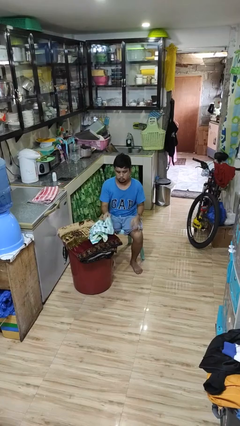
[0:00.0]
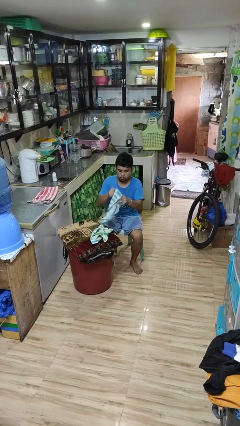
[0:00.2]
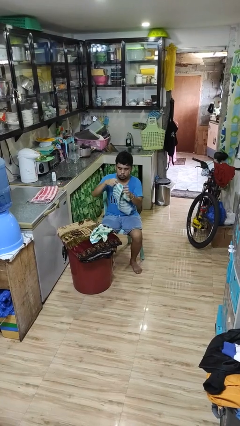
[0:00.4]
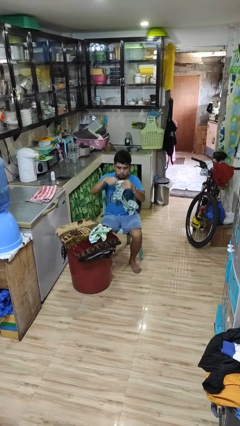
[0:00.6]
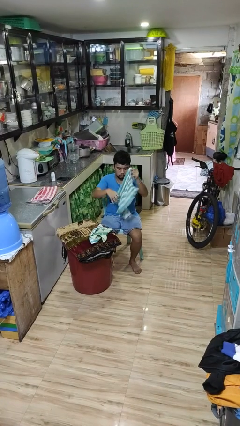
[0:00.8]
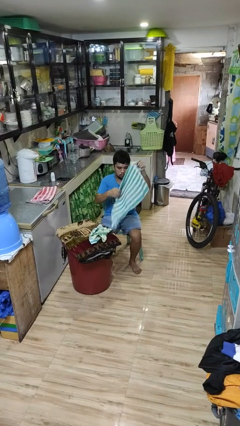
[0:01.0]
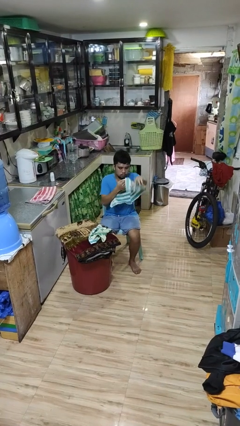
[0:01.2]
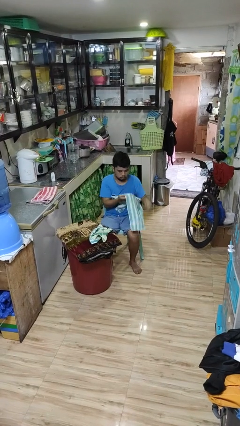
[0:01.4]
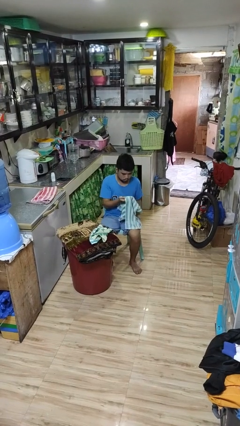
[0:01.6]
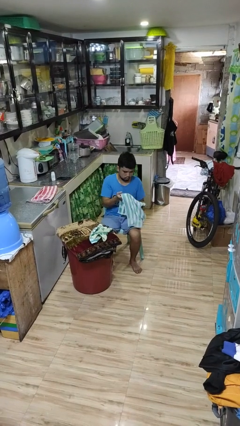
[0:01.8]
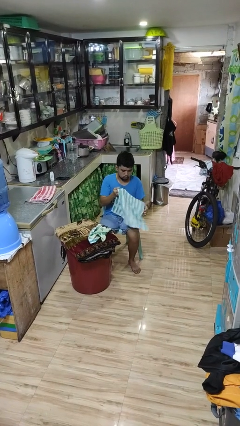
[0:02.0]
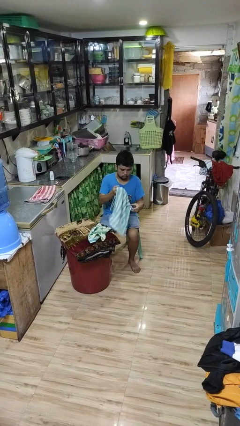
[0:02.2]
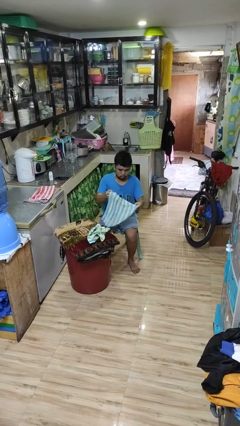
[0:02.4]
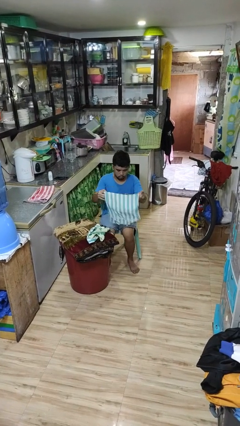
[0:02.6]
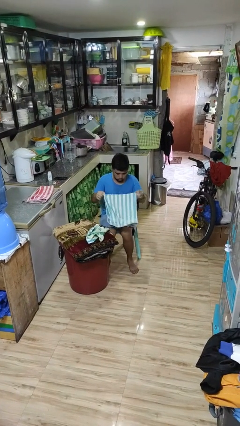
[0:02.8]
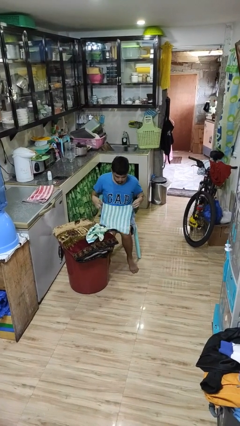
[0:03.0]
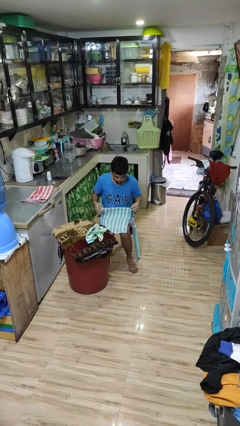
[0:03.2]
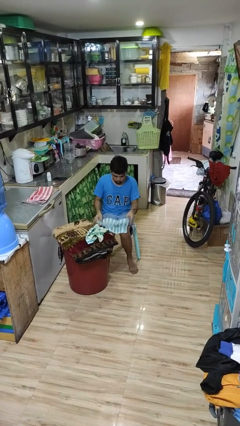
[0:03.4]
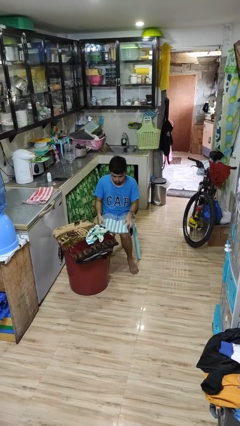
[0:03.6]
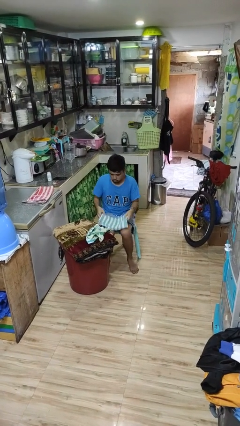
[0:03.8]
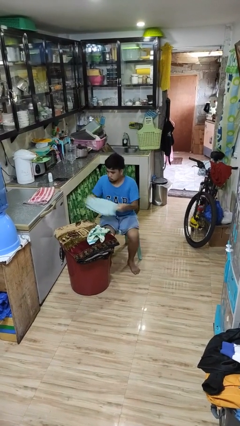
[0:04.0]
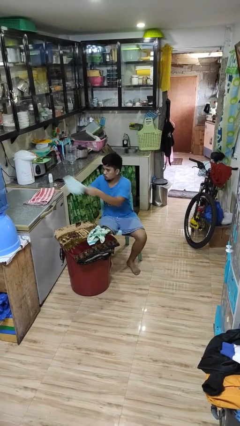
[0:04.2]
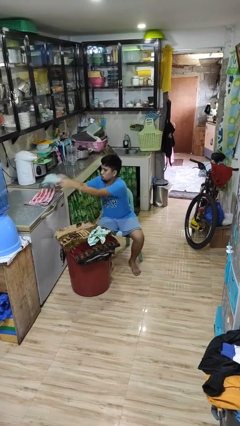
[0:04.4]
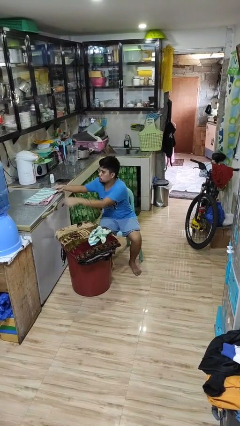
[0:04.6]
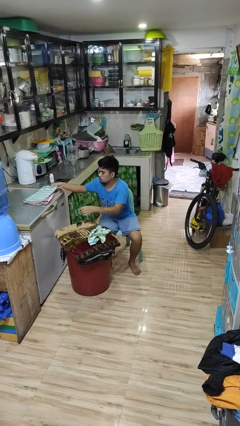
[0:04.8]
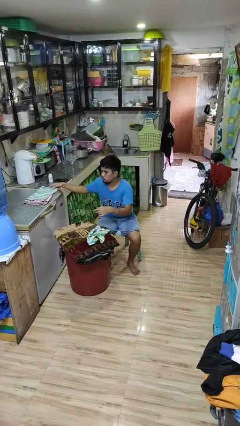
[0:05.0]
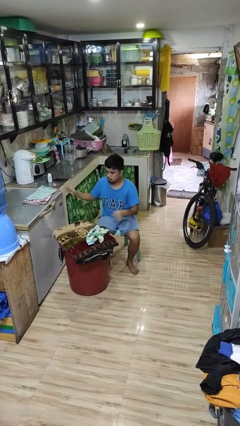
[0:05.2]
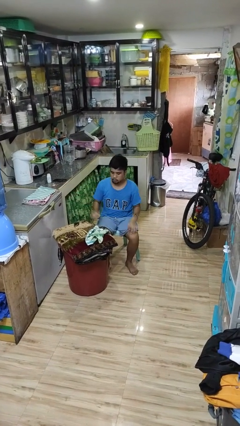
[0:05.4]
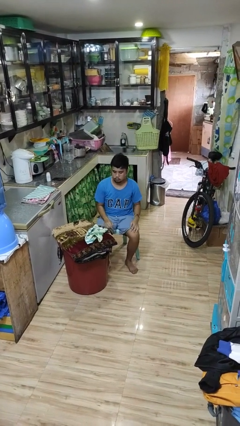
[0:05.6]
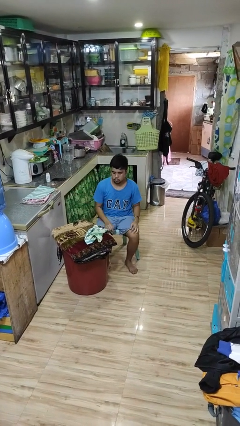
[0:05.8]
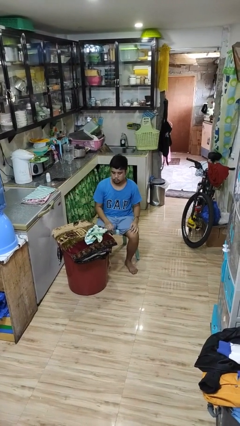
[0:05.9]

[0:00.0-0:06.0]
person folds towel

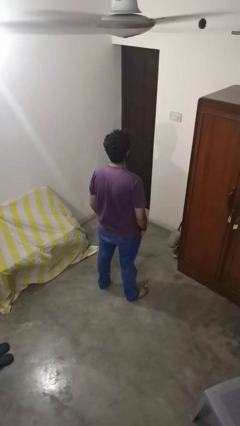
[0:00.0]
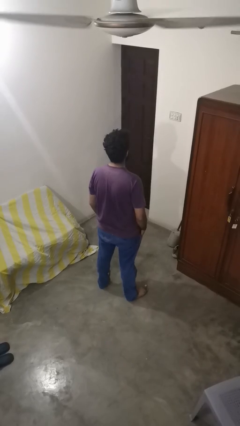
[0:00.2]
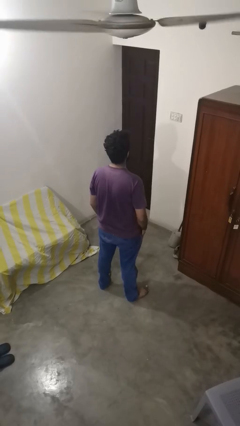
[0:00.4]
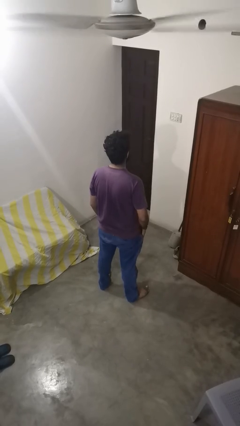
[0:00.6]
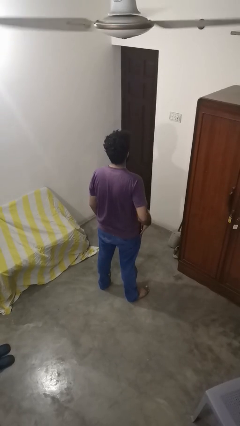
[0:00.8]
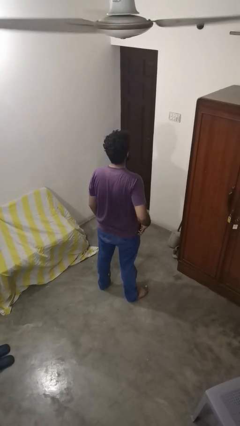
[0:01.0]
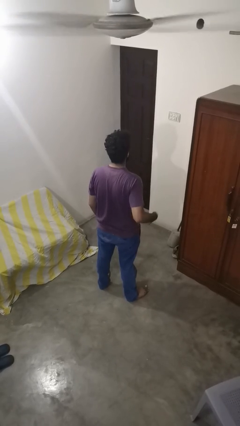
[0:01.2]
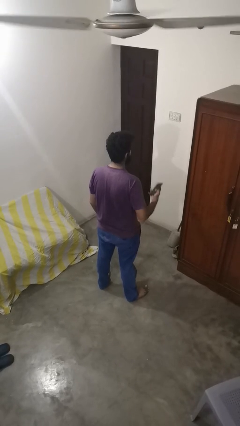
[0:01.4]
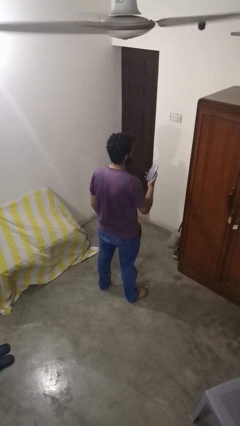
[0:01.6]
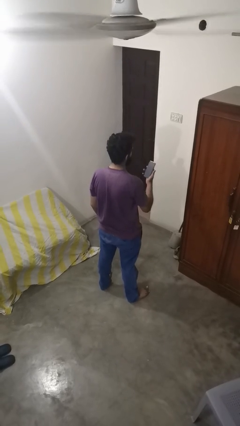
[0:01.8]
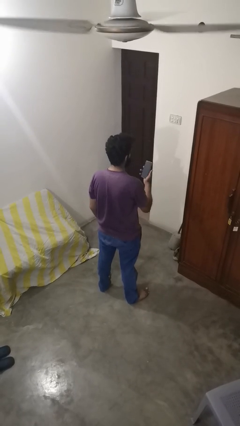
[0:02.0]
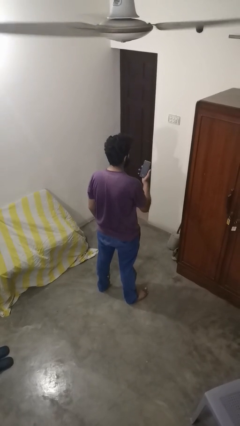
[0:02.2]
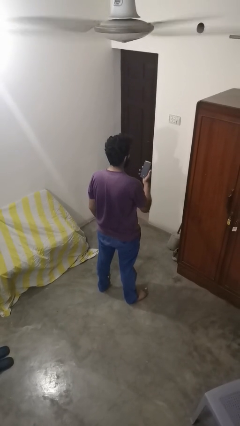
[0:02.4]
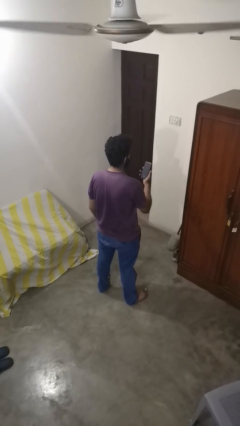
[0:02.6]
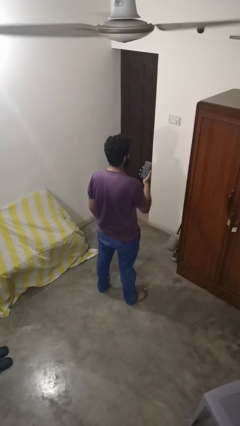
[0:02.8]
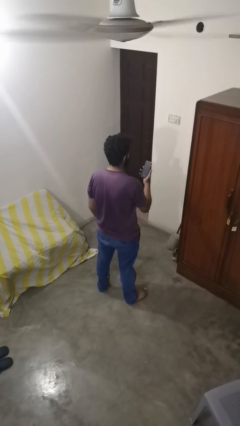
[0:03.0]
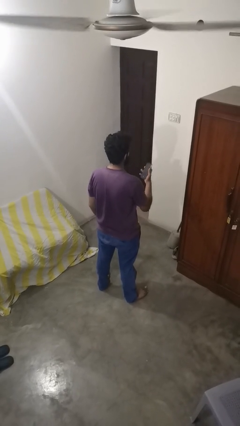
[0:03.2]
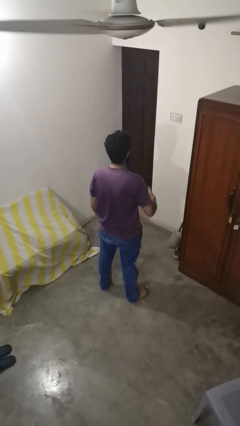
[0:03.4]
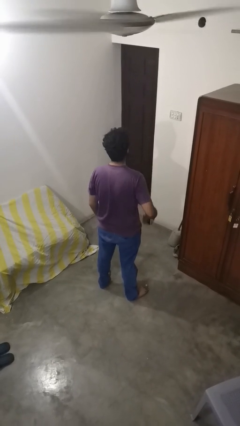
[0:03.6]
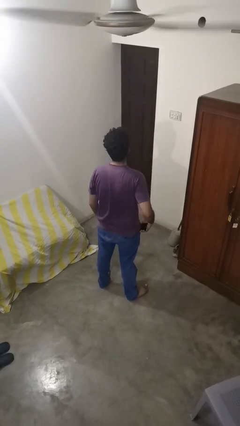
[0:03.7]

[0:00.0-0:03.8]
person takes phone from pocket

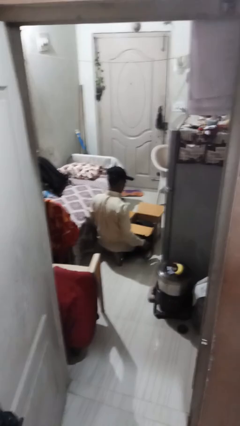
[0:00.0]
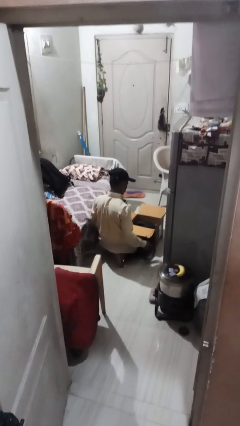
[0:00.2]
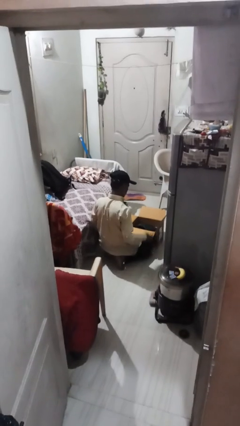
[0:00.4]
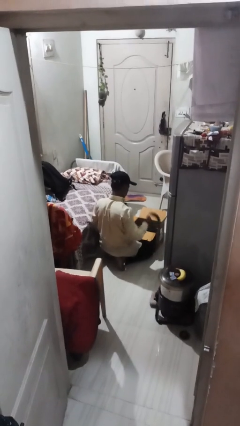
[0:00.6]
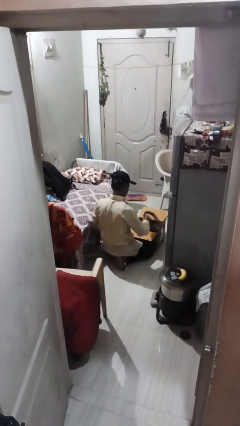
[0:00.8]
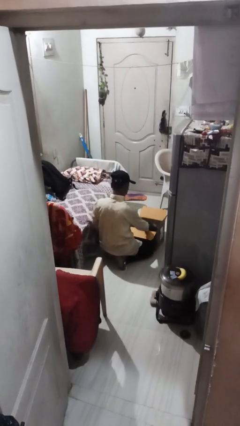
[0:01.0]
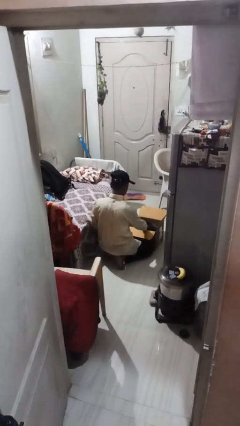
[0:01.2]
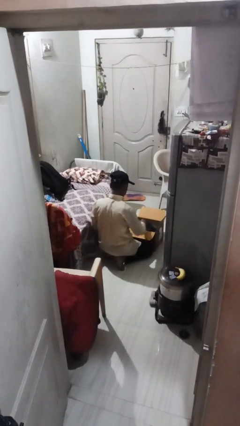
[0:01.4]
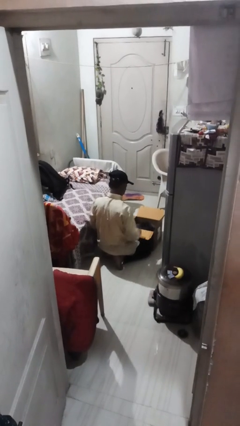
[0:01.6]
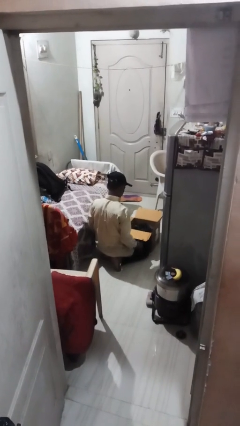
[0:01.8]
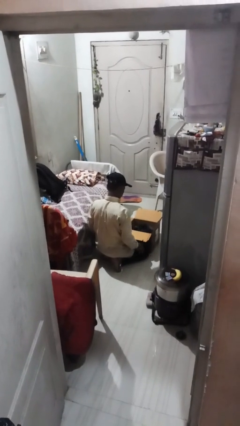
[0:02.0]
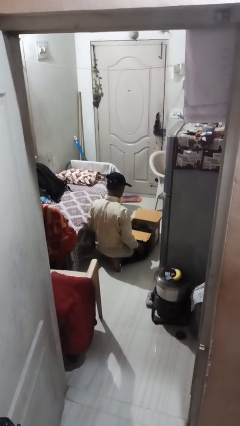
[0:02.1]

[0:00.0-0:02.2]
person puts object into box

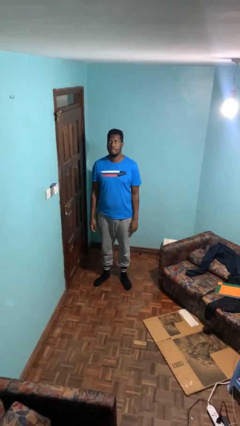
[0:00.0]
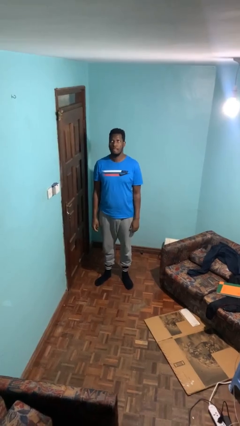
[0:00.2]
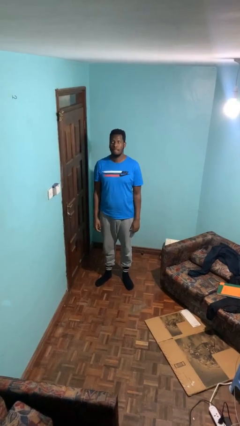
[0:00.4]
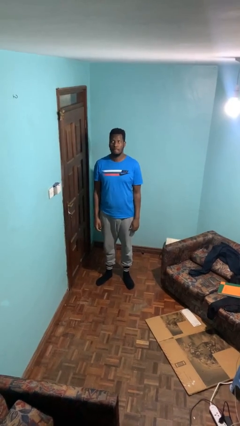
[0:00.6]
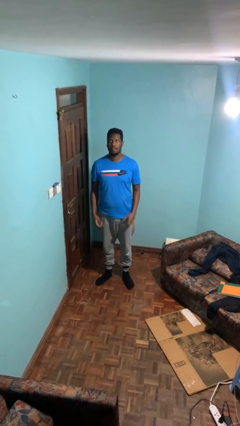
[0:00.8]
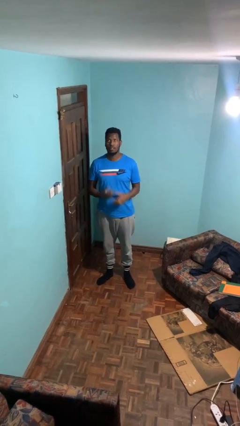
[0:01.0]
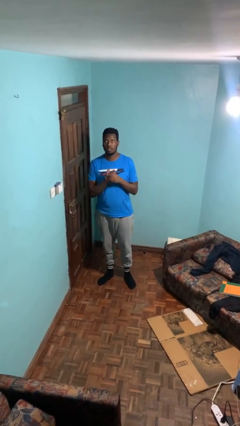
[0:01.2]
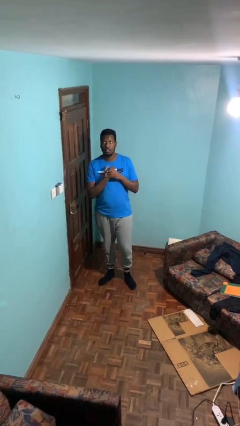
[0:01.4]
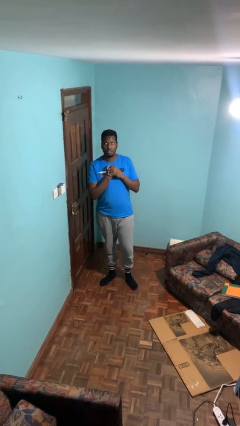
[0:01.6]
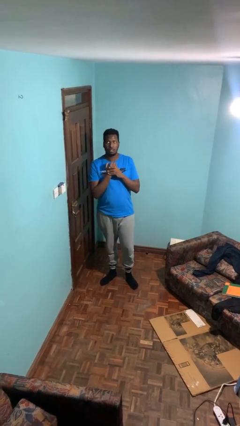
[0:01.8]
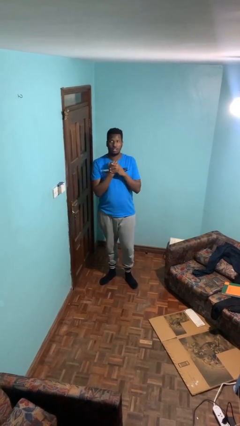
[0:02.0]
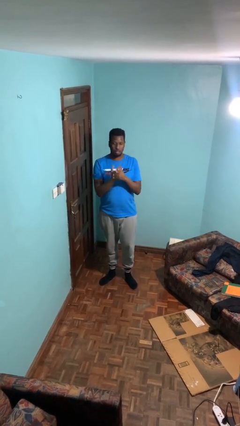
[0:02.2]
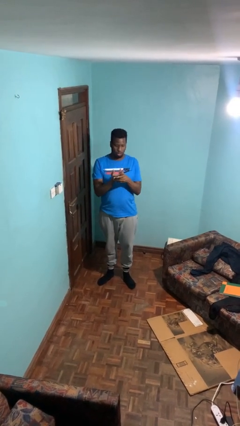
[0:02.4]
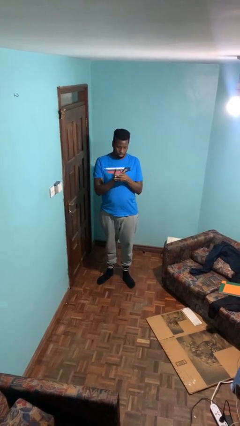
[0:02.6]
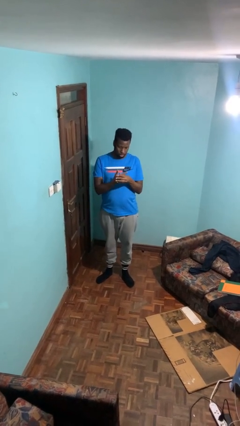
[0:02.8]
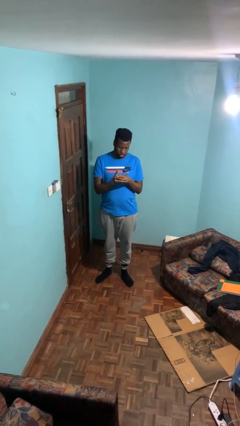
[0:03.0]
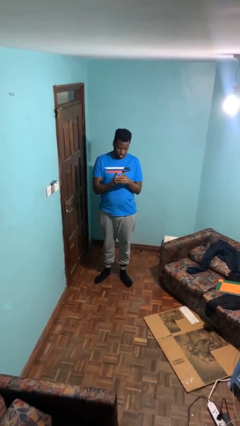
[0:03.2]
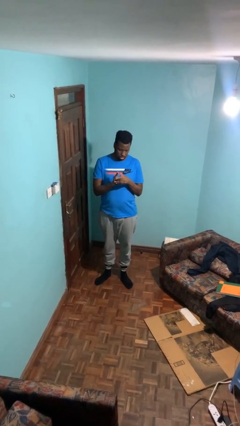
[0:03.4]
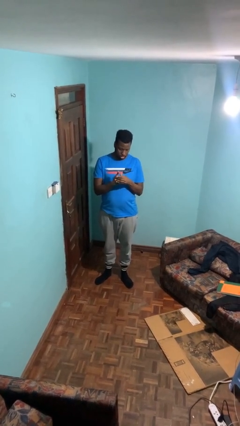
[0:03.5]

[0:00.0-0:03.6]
person cracks knuckles

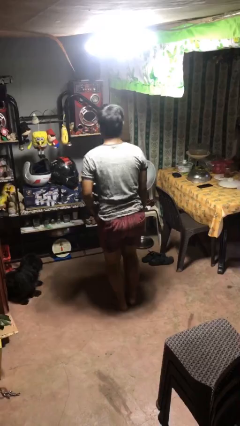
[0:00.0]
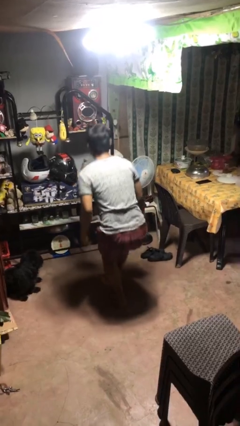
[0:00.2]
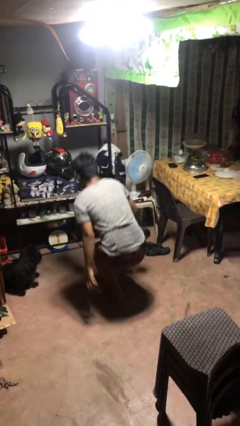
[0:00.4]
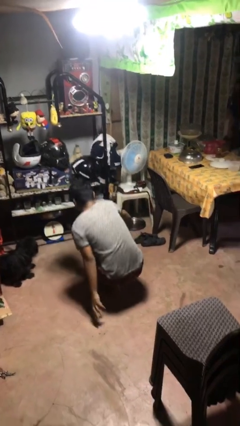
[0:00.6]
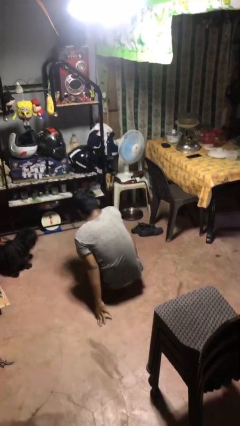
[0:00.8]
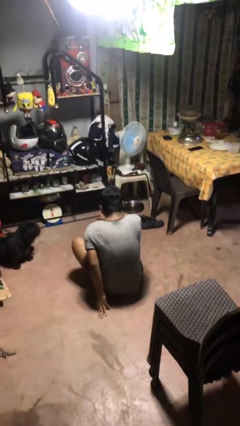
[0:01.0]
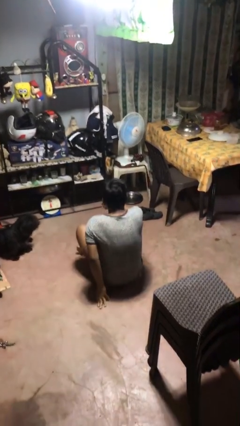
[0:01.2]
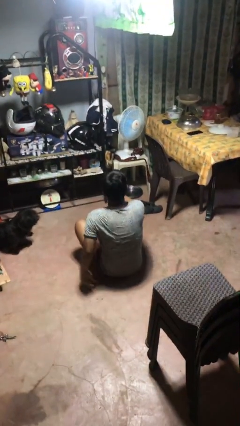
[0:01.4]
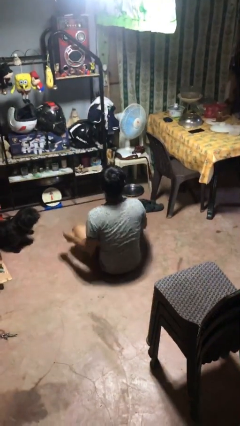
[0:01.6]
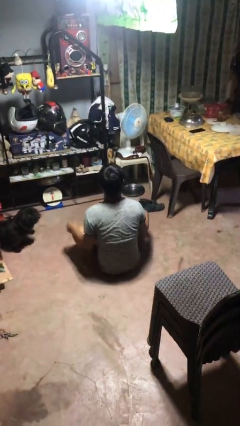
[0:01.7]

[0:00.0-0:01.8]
person sits crisscross

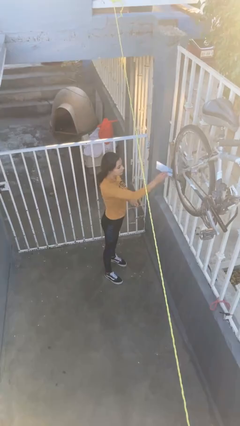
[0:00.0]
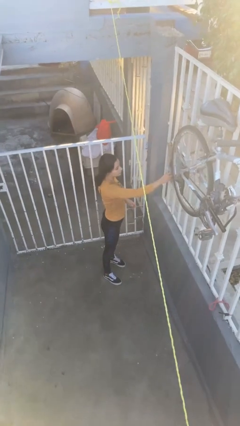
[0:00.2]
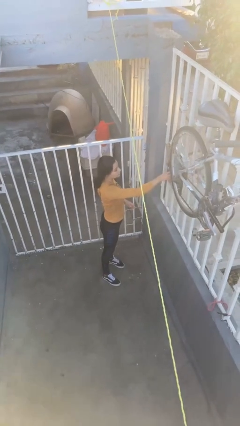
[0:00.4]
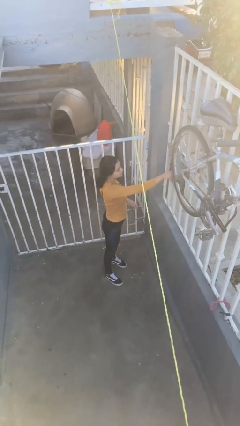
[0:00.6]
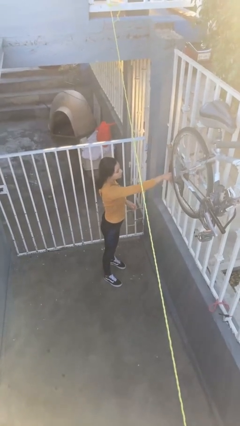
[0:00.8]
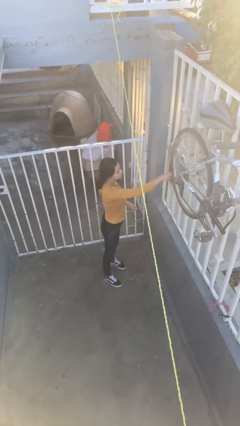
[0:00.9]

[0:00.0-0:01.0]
person puts letters in mailbox
